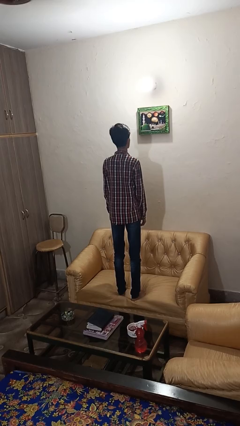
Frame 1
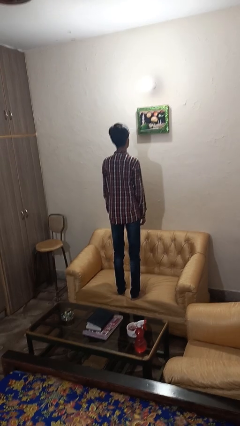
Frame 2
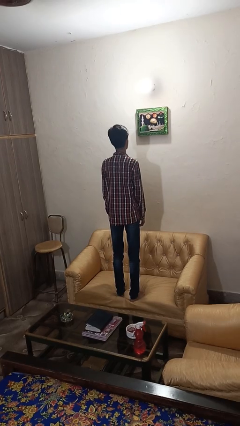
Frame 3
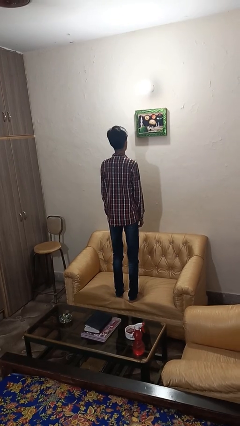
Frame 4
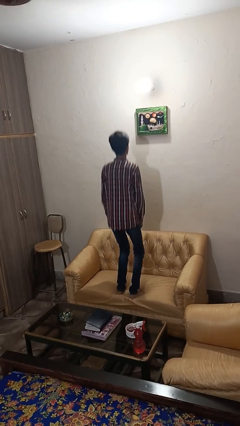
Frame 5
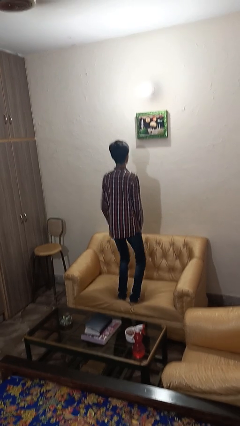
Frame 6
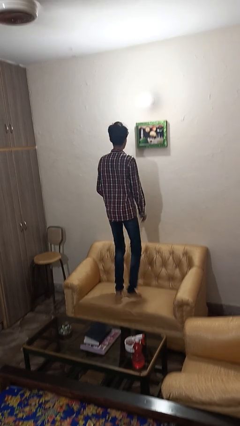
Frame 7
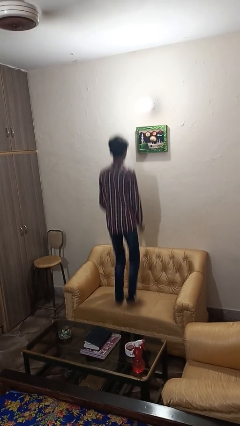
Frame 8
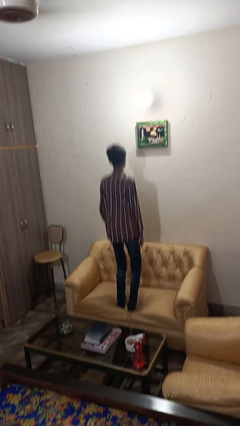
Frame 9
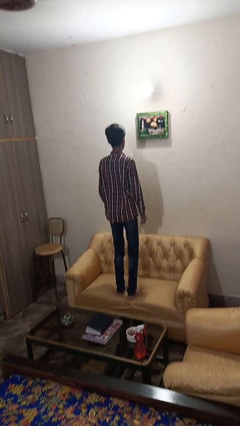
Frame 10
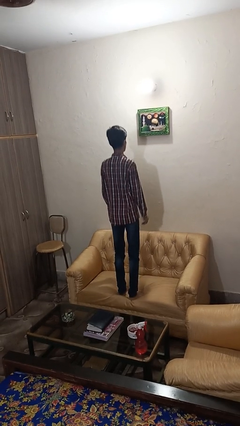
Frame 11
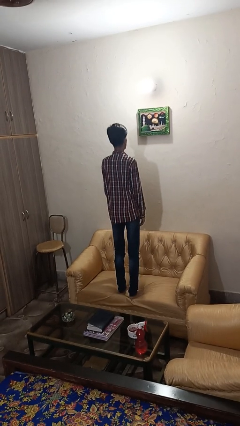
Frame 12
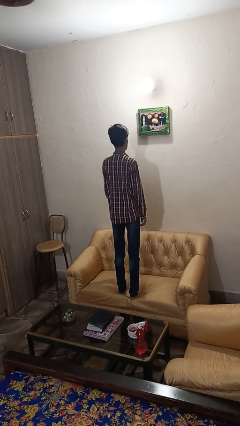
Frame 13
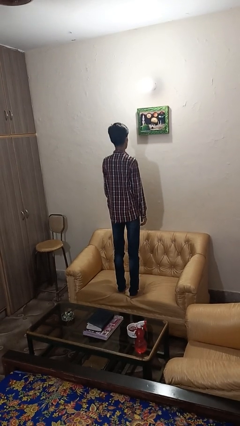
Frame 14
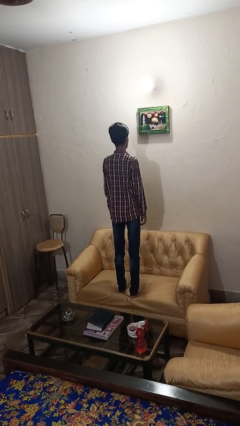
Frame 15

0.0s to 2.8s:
person jumps on couch

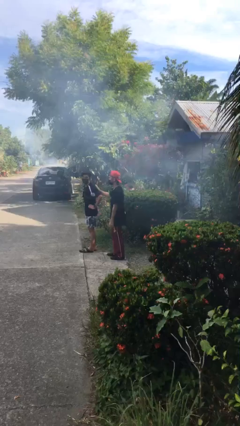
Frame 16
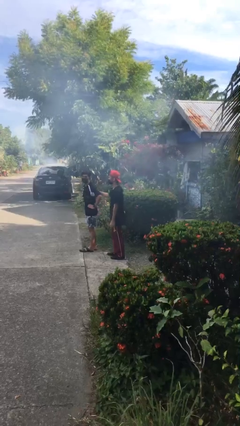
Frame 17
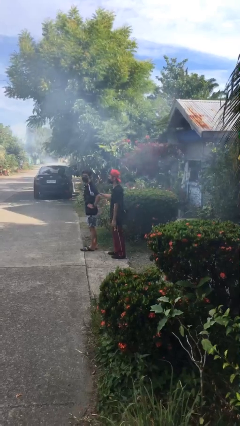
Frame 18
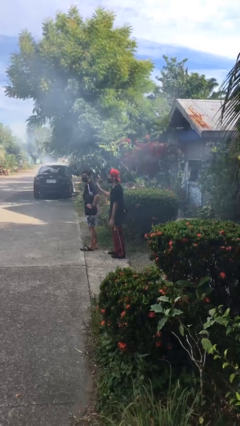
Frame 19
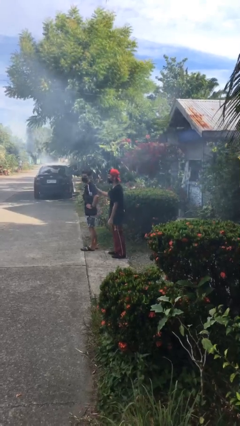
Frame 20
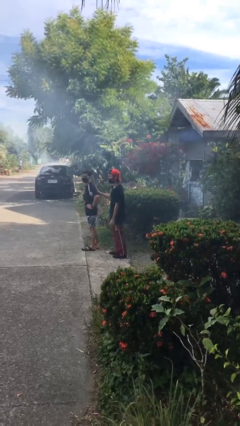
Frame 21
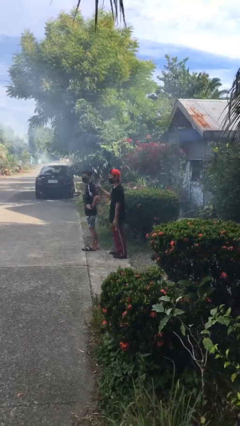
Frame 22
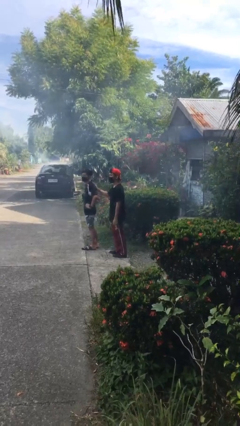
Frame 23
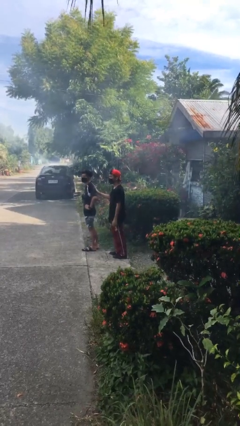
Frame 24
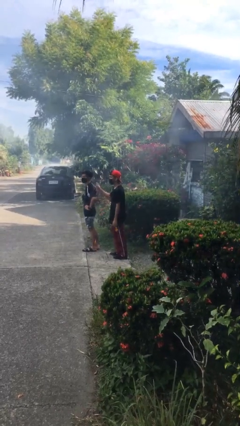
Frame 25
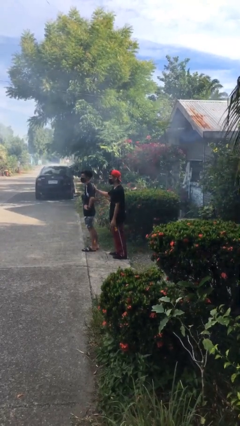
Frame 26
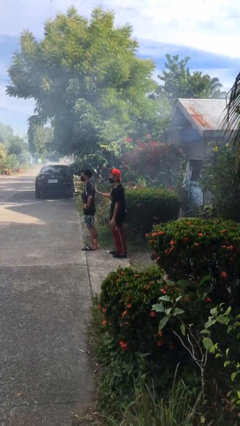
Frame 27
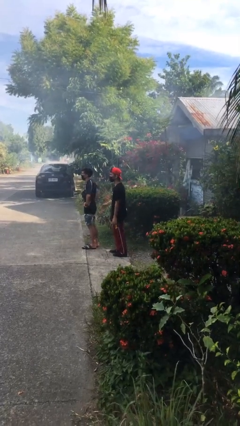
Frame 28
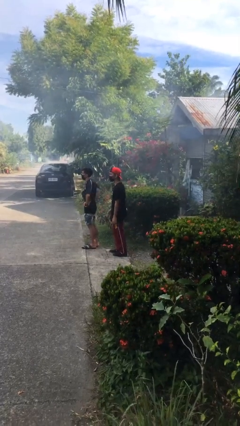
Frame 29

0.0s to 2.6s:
person touches back of person

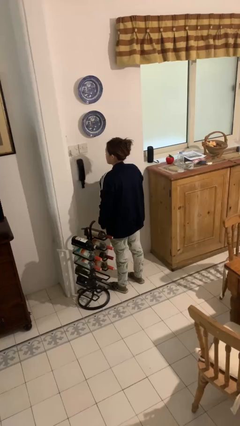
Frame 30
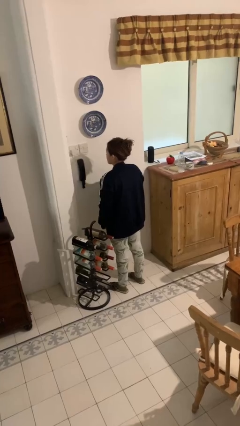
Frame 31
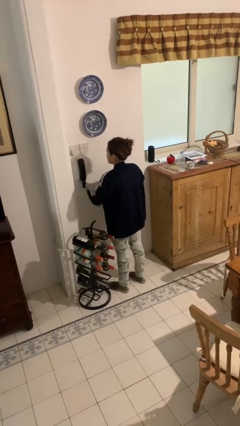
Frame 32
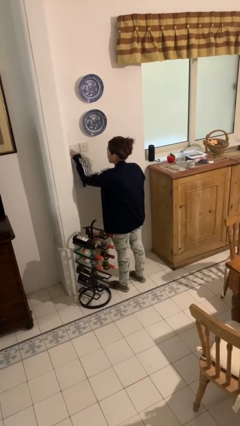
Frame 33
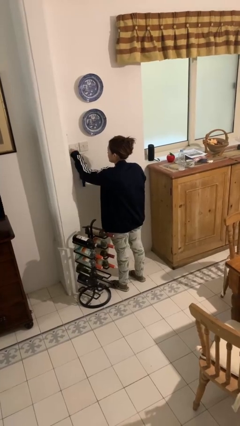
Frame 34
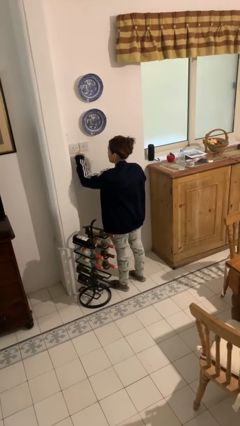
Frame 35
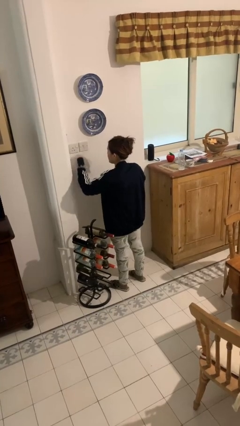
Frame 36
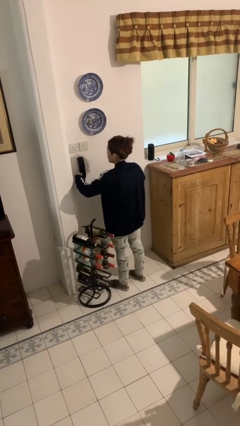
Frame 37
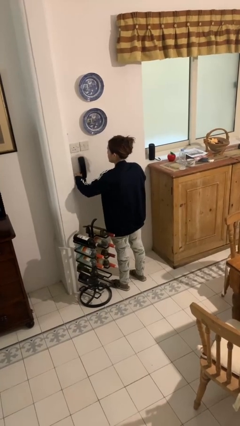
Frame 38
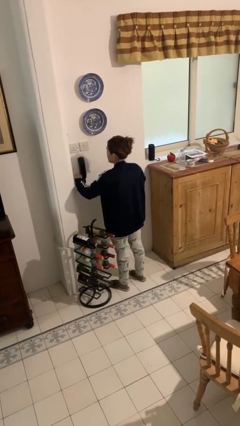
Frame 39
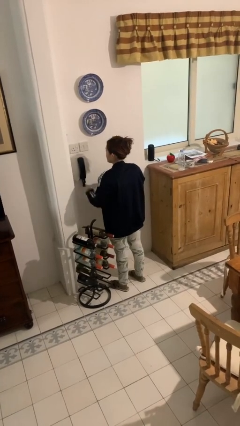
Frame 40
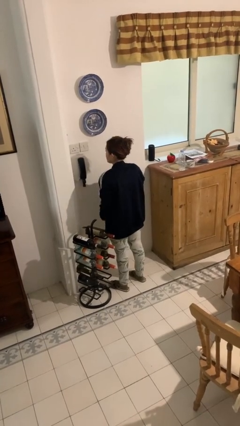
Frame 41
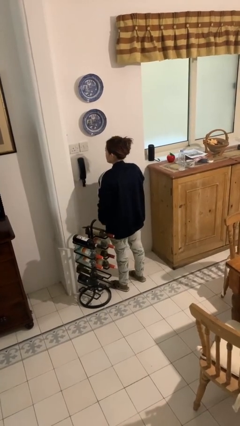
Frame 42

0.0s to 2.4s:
person unplugs from electrical socket

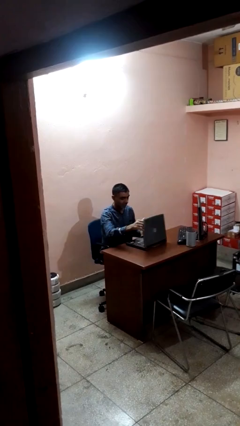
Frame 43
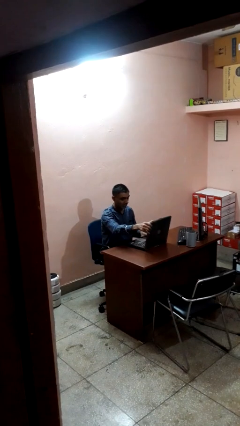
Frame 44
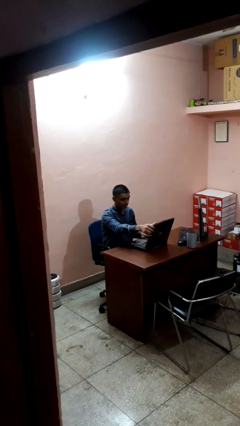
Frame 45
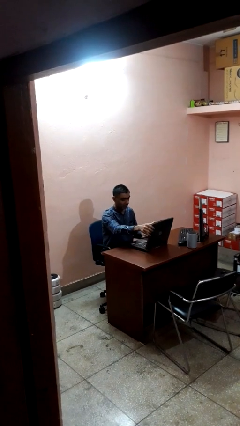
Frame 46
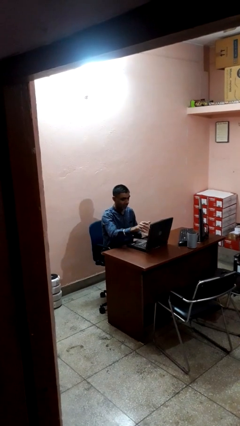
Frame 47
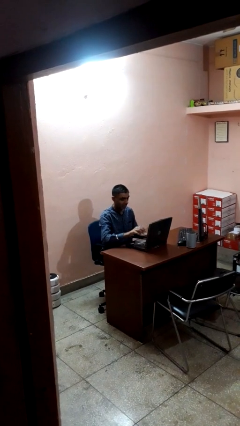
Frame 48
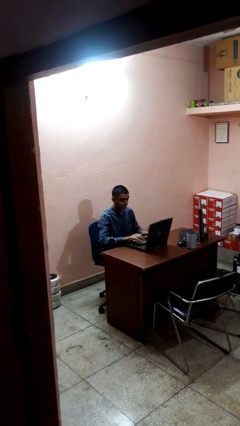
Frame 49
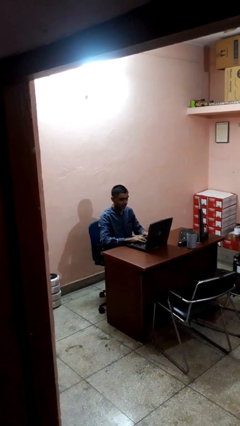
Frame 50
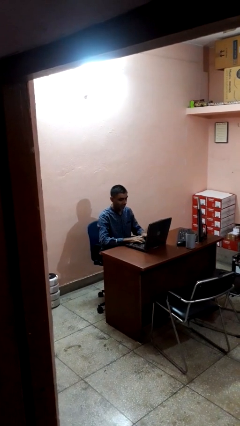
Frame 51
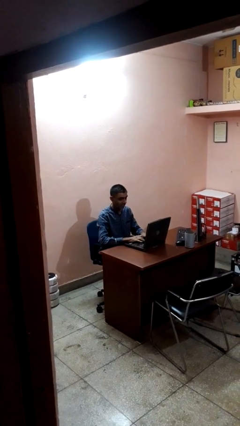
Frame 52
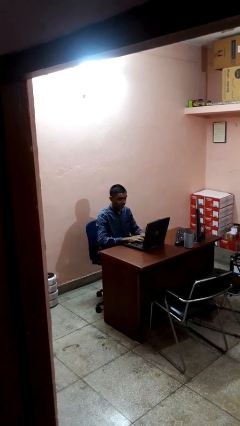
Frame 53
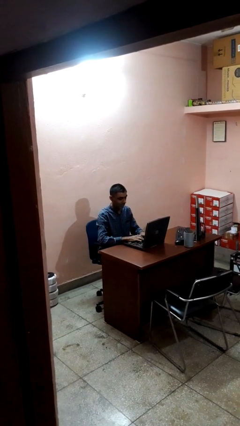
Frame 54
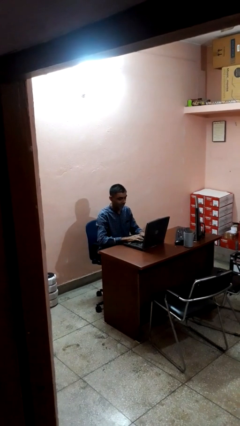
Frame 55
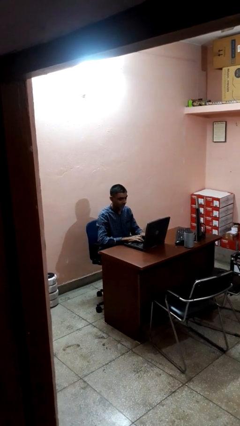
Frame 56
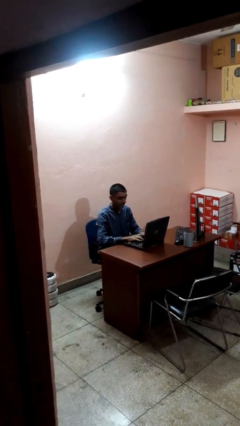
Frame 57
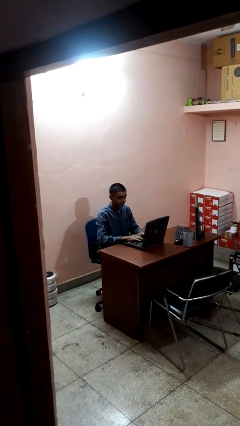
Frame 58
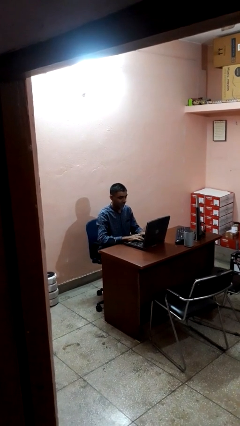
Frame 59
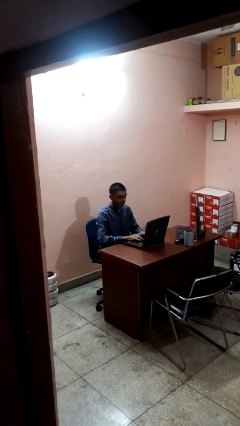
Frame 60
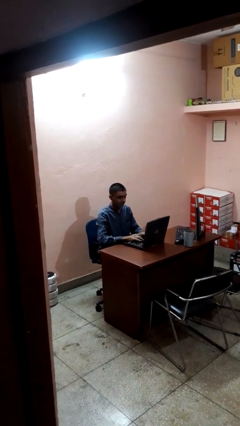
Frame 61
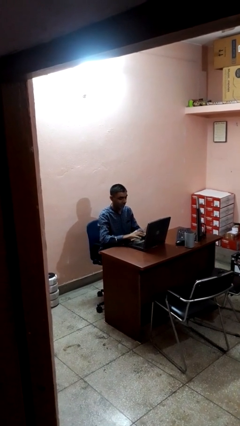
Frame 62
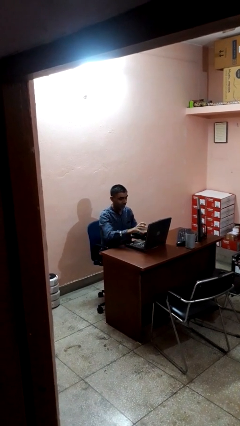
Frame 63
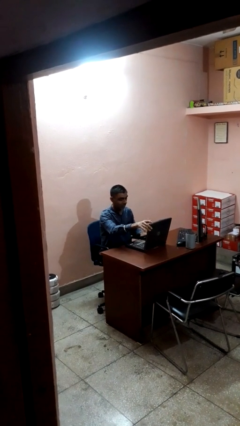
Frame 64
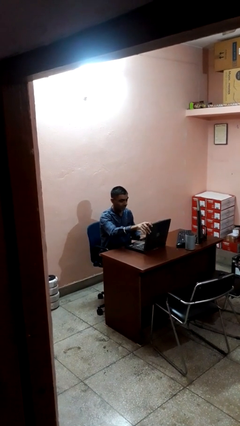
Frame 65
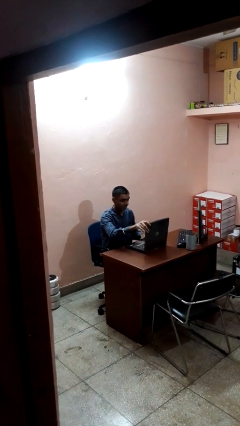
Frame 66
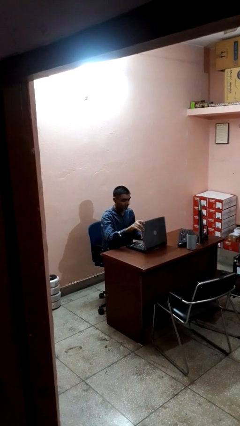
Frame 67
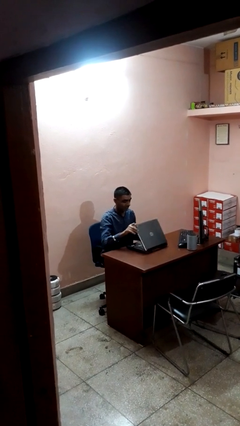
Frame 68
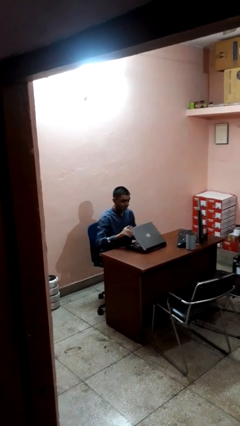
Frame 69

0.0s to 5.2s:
person interacts with laptop

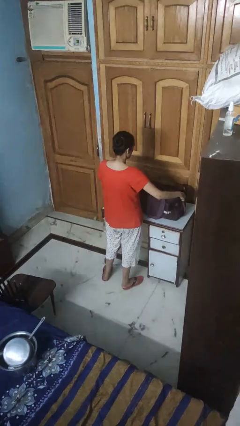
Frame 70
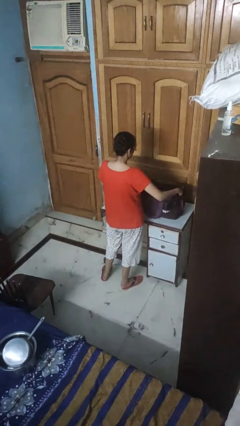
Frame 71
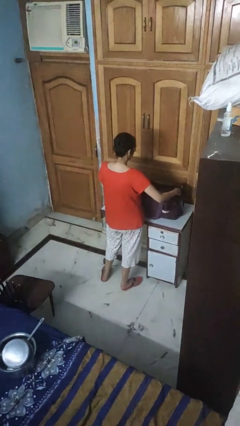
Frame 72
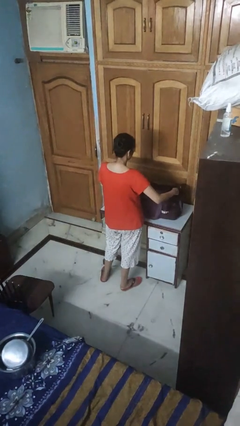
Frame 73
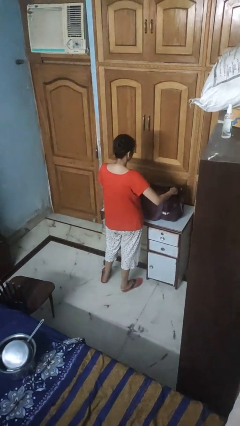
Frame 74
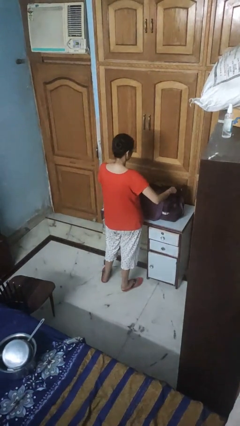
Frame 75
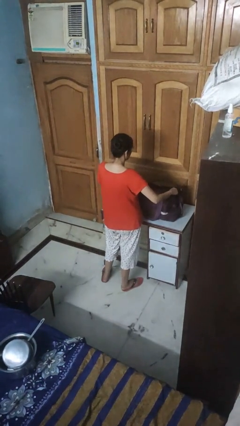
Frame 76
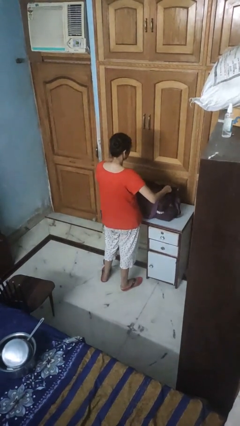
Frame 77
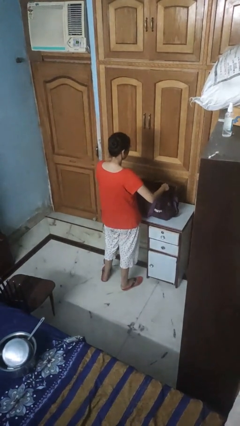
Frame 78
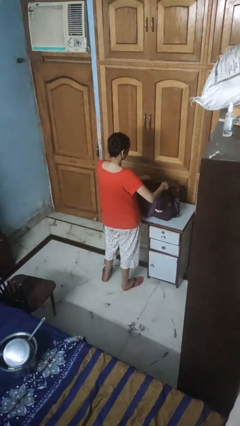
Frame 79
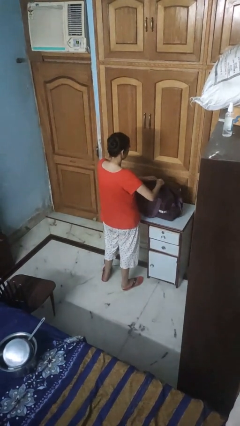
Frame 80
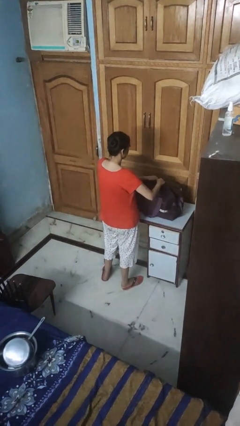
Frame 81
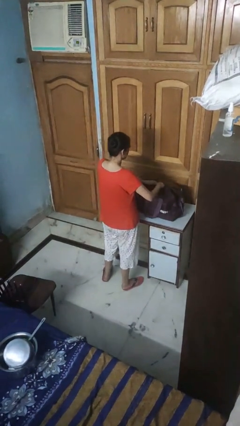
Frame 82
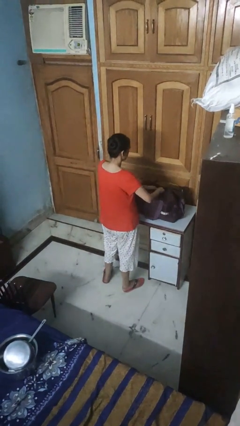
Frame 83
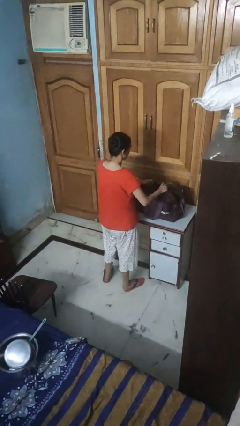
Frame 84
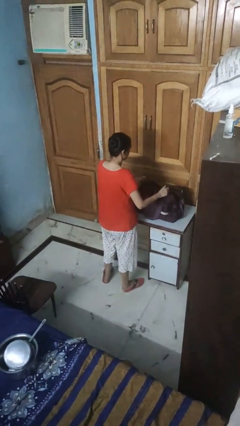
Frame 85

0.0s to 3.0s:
person closes suitcase

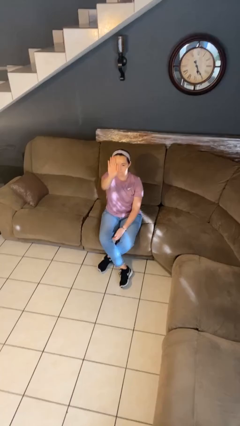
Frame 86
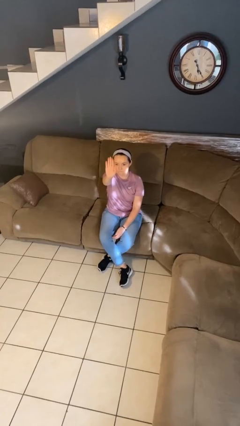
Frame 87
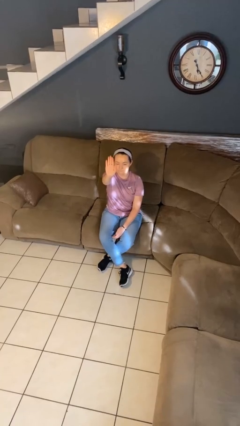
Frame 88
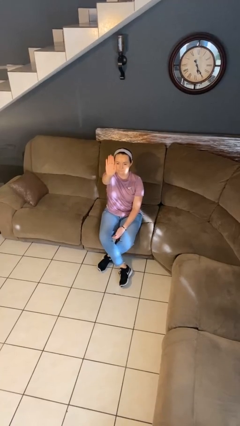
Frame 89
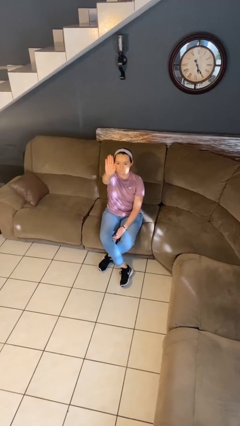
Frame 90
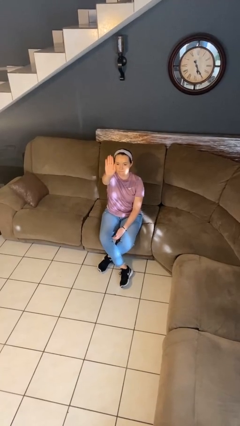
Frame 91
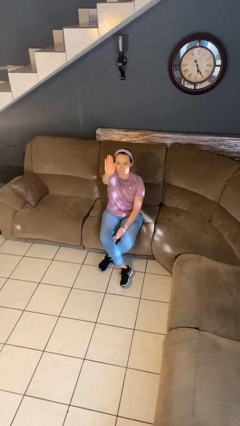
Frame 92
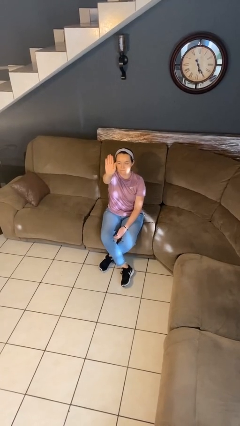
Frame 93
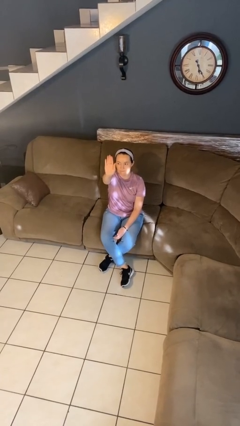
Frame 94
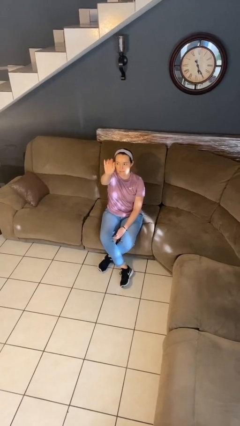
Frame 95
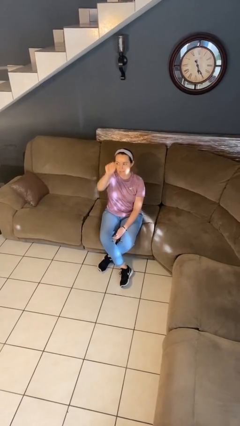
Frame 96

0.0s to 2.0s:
person gestures stop
